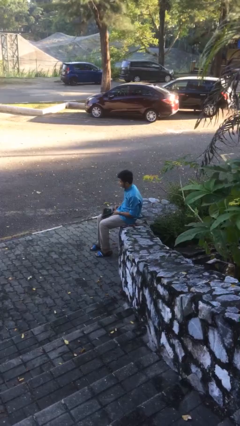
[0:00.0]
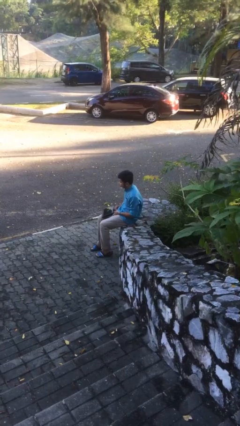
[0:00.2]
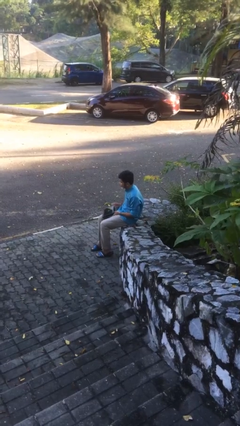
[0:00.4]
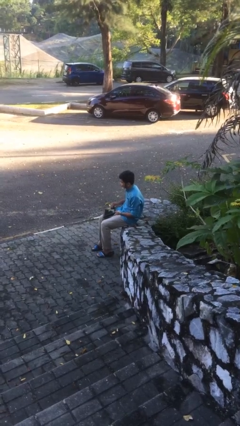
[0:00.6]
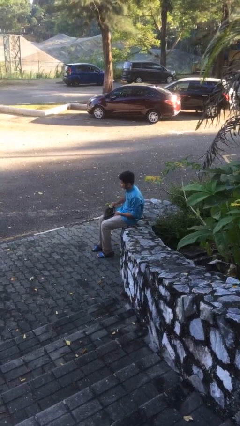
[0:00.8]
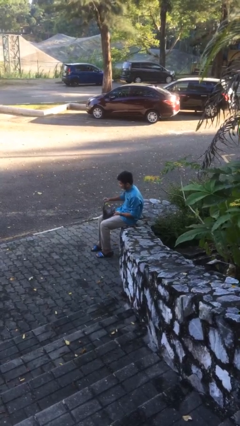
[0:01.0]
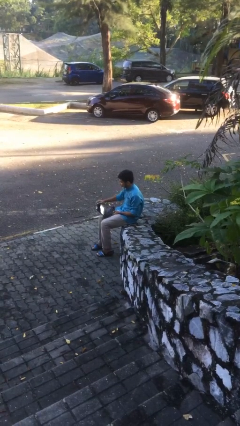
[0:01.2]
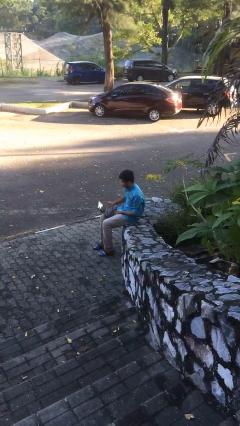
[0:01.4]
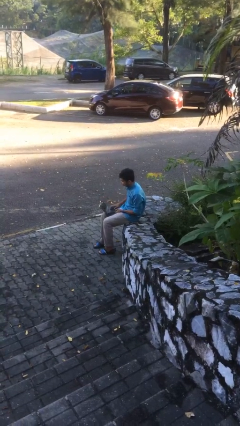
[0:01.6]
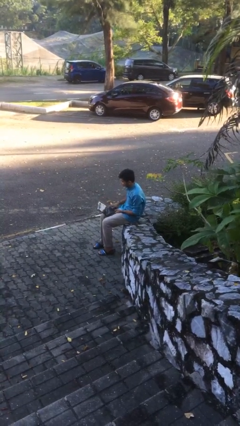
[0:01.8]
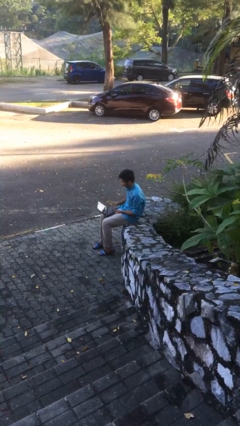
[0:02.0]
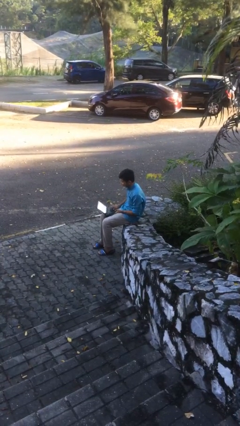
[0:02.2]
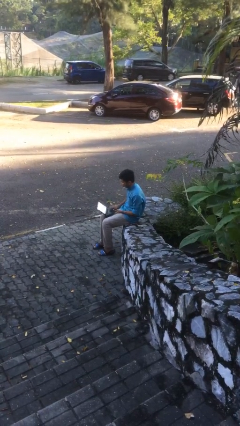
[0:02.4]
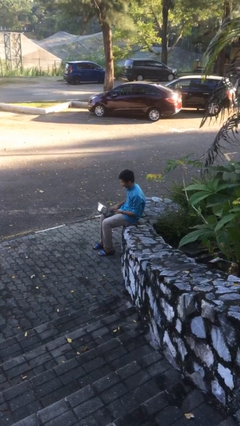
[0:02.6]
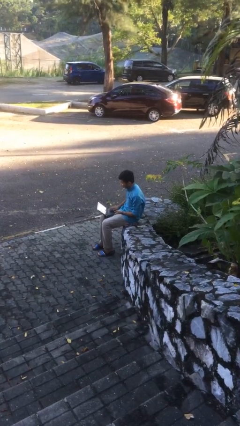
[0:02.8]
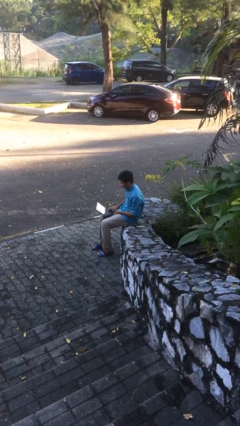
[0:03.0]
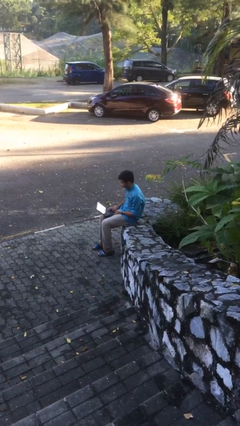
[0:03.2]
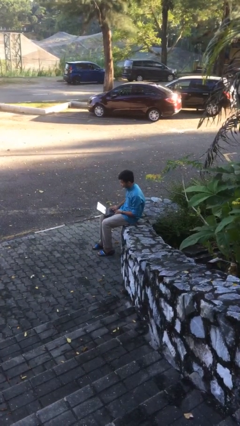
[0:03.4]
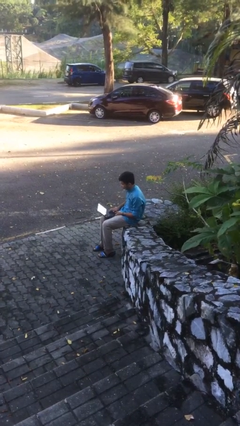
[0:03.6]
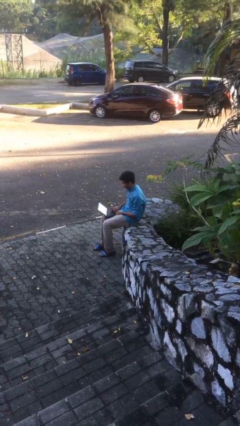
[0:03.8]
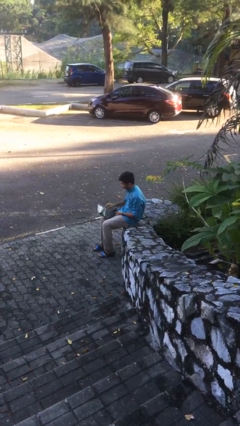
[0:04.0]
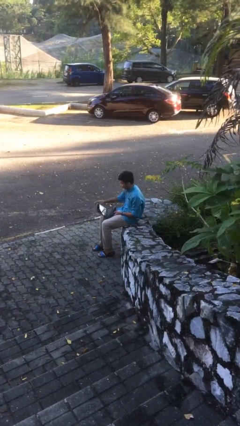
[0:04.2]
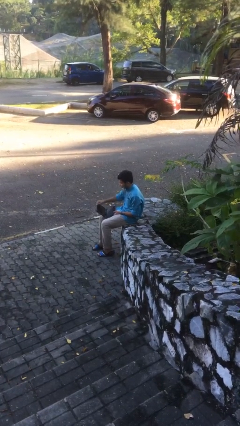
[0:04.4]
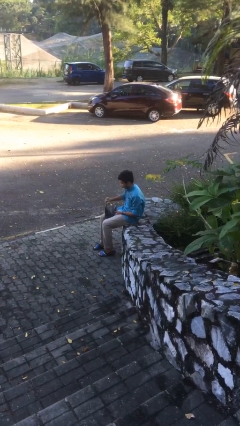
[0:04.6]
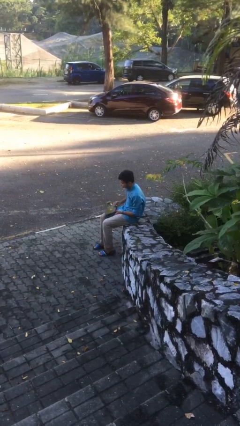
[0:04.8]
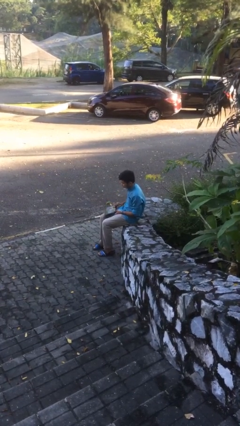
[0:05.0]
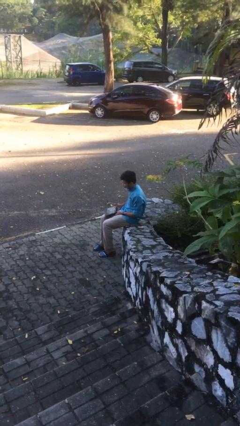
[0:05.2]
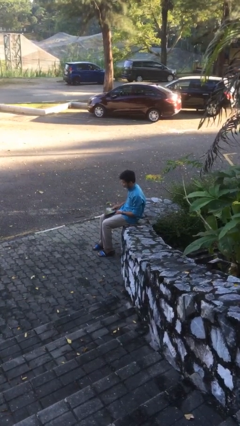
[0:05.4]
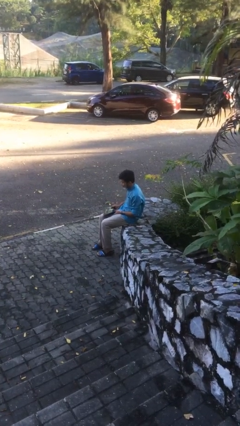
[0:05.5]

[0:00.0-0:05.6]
person interacts with laptop

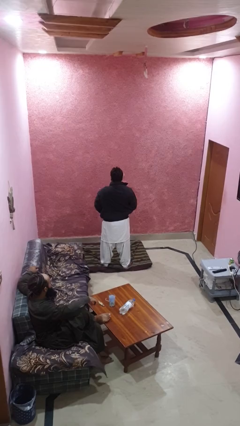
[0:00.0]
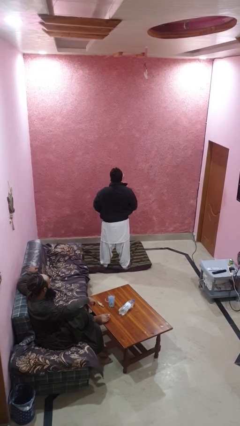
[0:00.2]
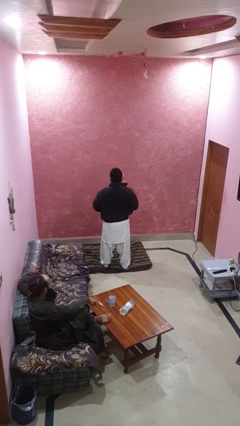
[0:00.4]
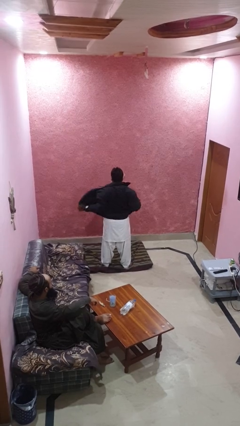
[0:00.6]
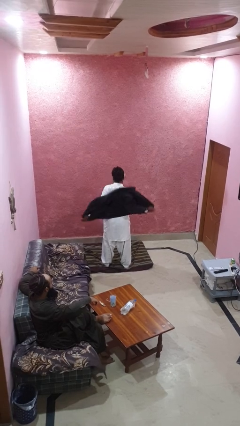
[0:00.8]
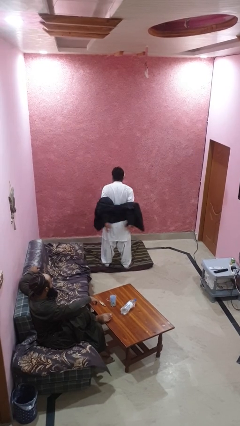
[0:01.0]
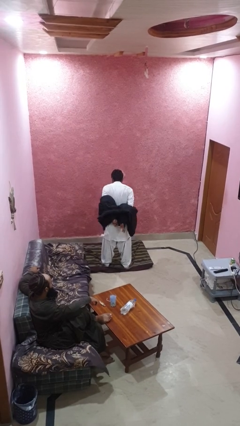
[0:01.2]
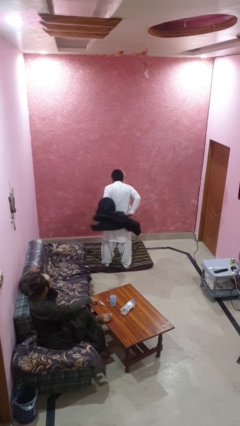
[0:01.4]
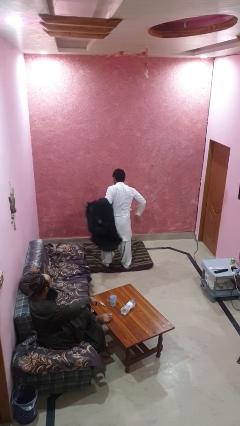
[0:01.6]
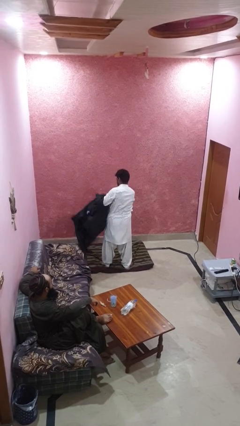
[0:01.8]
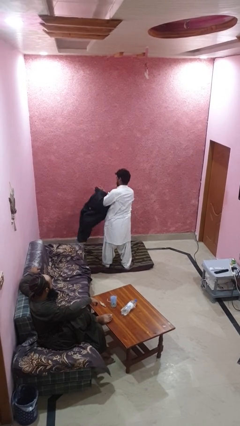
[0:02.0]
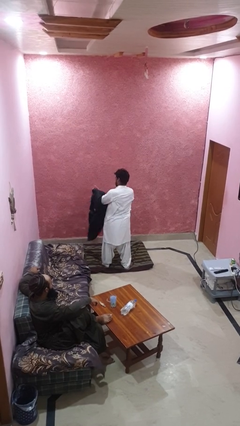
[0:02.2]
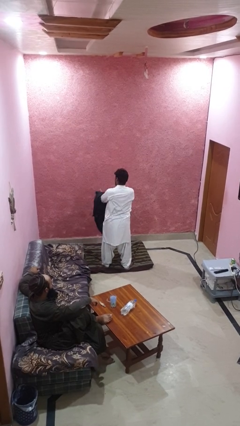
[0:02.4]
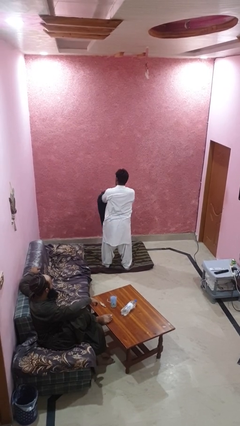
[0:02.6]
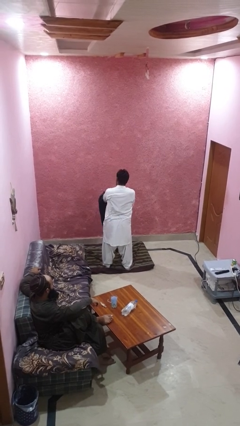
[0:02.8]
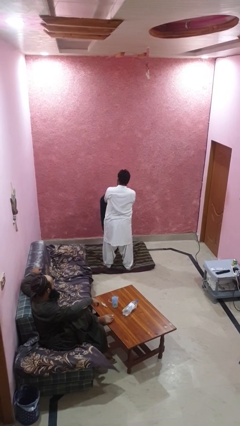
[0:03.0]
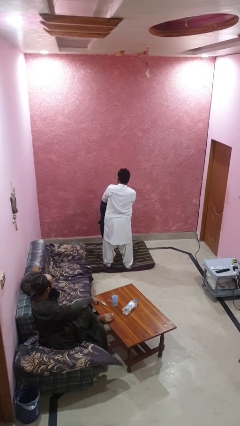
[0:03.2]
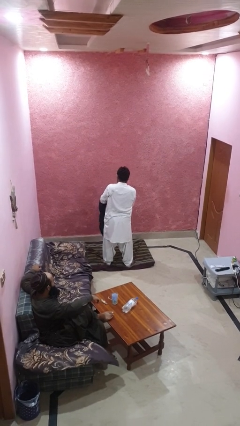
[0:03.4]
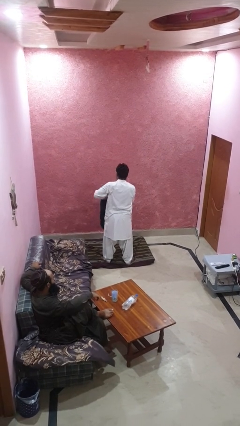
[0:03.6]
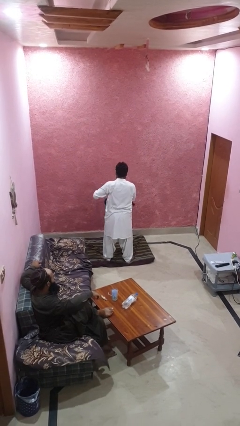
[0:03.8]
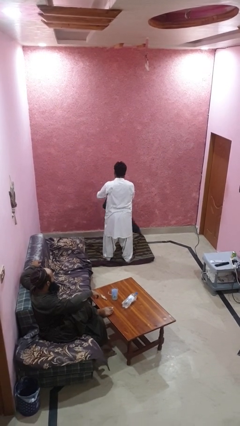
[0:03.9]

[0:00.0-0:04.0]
person takes off jacket

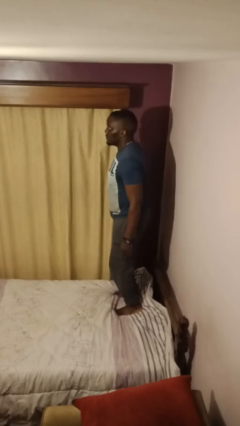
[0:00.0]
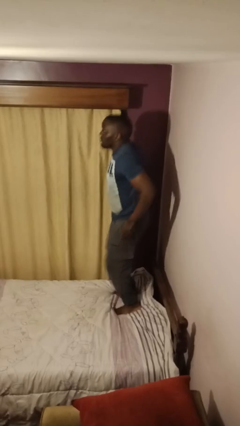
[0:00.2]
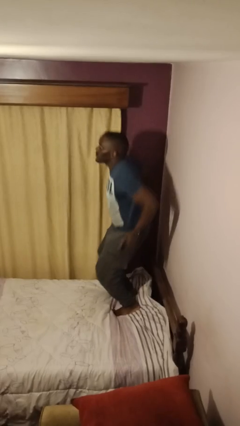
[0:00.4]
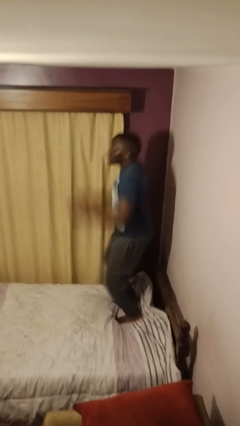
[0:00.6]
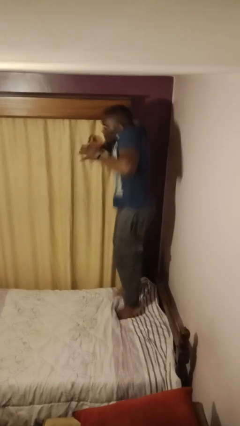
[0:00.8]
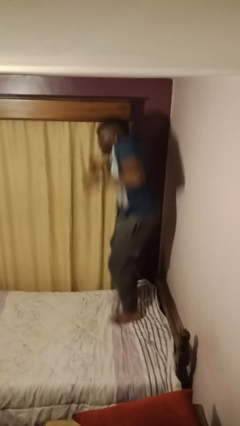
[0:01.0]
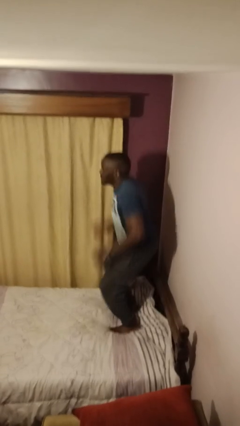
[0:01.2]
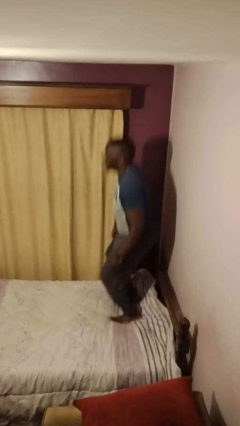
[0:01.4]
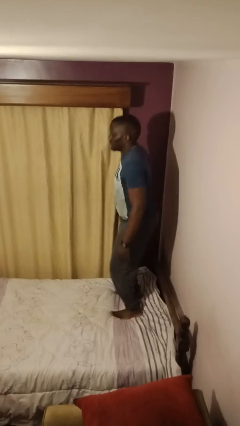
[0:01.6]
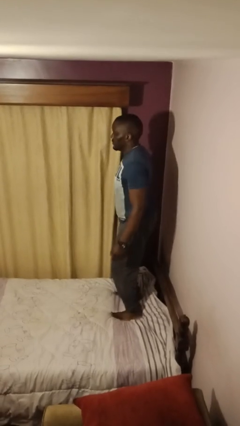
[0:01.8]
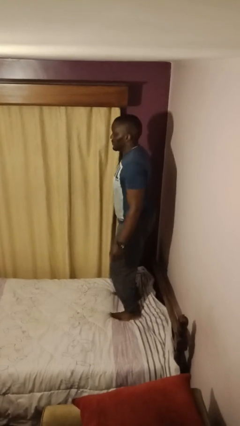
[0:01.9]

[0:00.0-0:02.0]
person jumps on bed

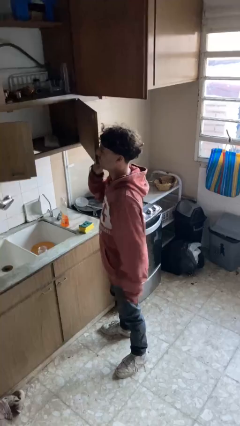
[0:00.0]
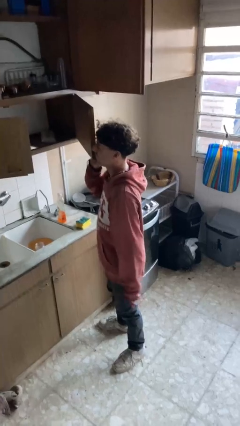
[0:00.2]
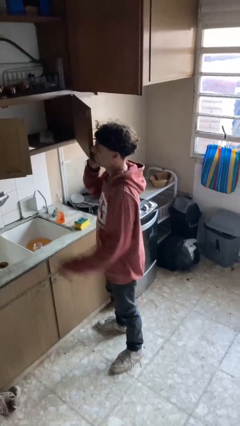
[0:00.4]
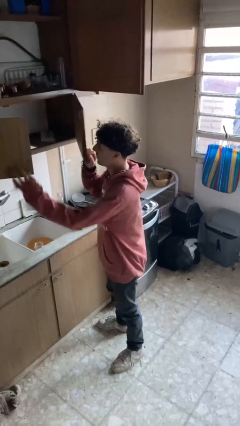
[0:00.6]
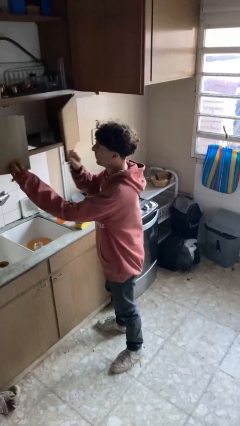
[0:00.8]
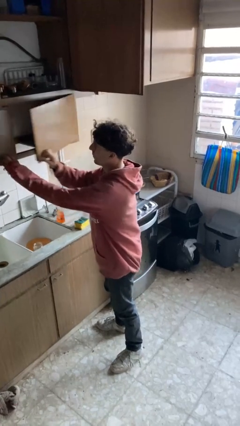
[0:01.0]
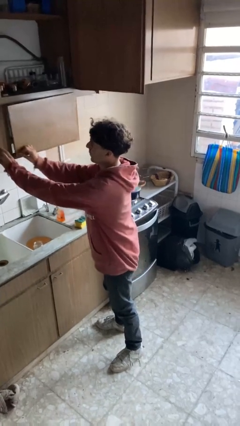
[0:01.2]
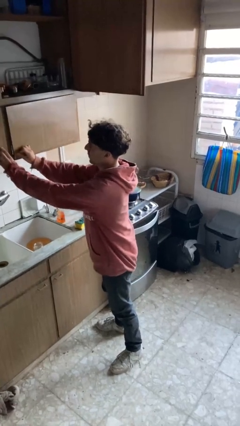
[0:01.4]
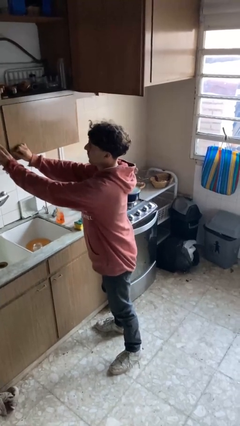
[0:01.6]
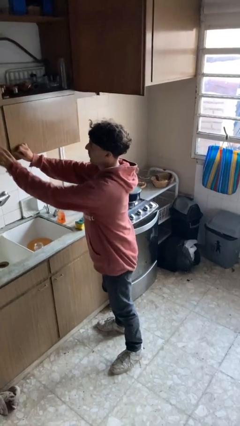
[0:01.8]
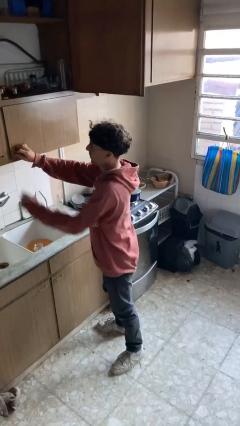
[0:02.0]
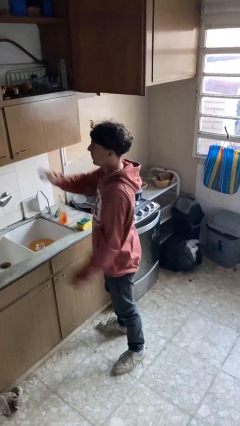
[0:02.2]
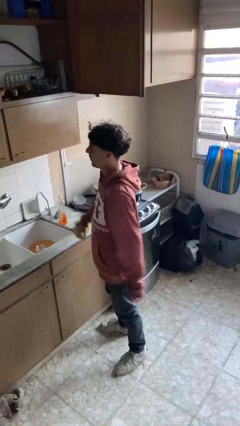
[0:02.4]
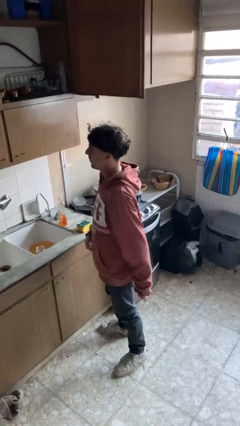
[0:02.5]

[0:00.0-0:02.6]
person closes cabinet

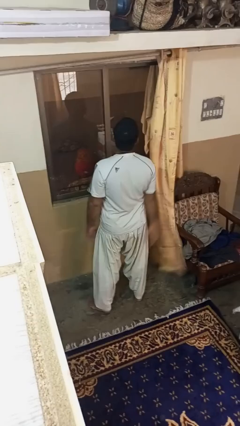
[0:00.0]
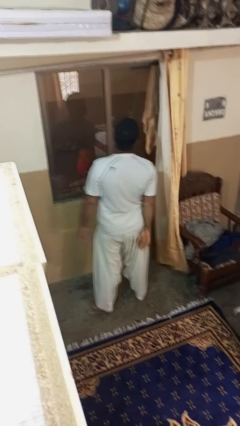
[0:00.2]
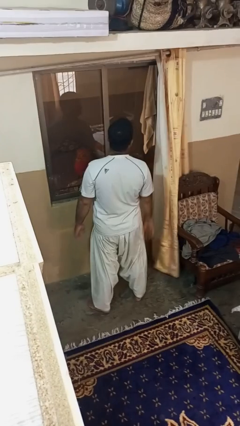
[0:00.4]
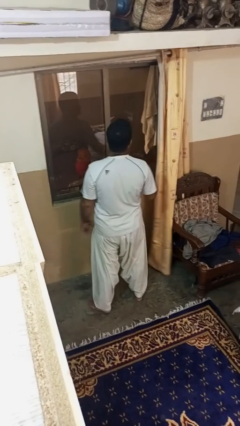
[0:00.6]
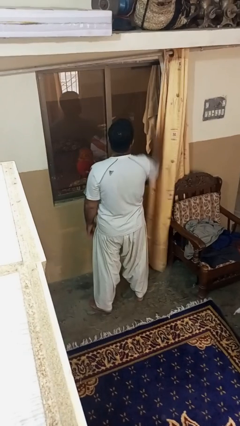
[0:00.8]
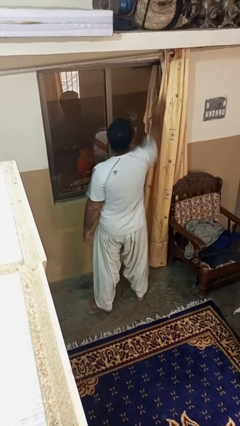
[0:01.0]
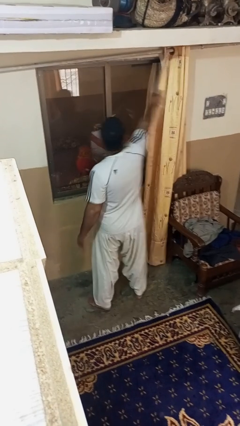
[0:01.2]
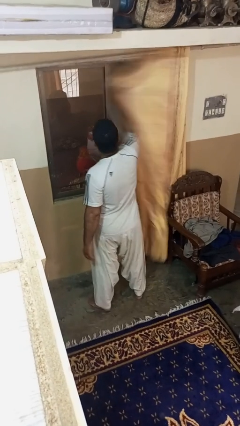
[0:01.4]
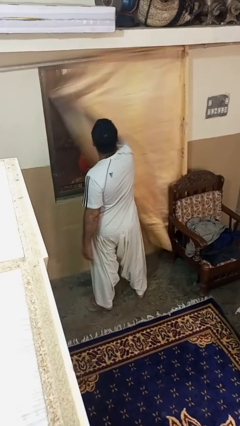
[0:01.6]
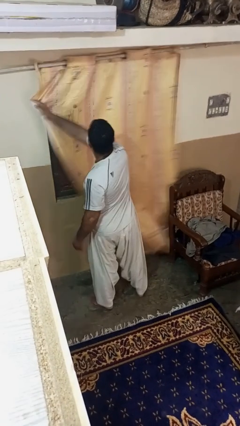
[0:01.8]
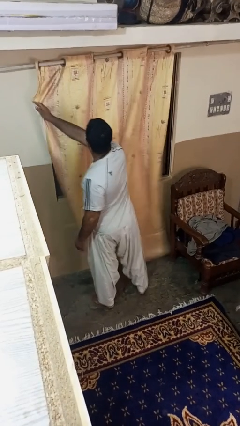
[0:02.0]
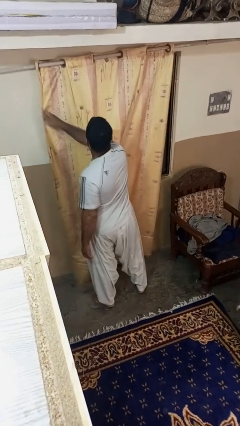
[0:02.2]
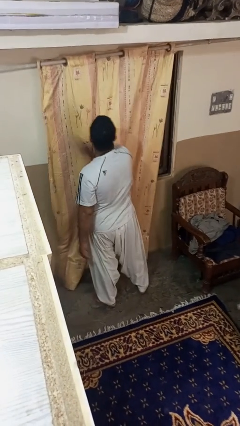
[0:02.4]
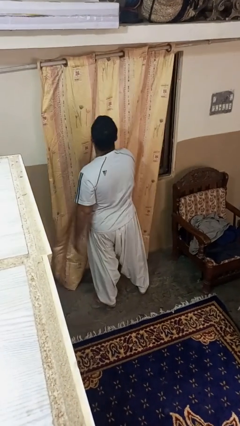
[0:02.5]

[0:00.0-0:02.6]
person closes curtains

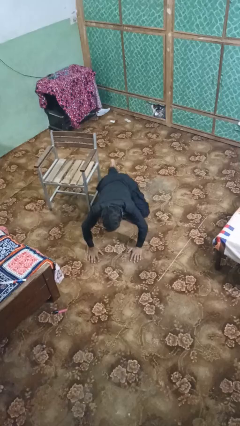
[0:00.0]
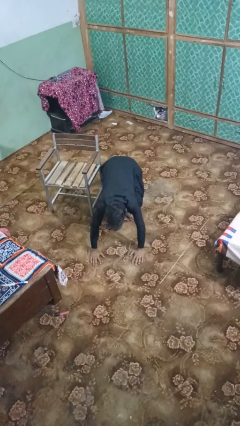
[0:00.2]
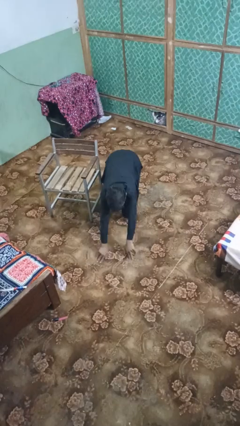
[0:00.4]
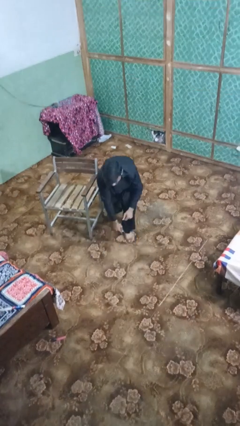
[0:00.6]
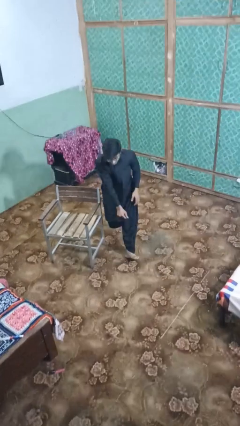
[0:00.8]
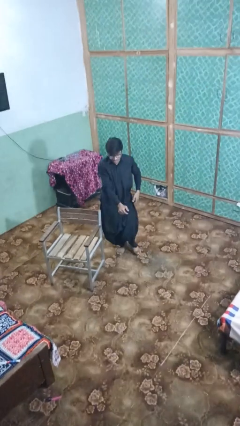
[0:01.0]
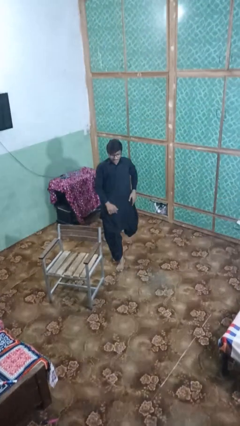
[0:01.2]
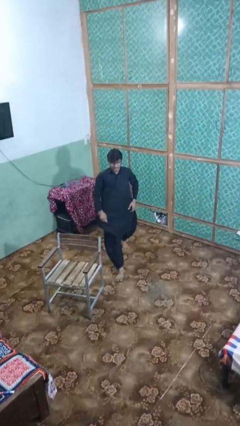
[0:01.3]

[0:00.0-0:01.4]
person stands up from floor
